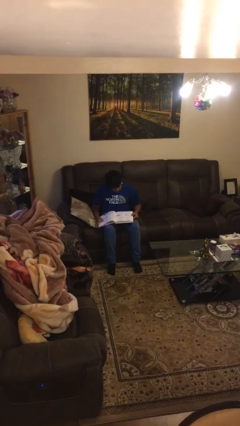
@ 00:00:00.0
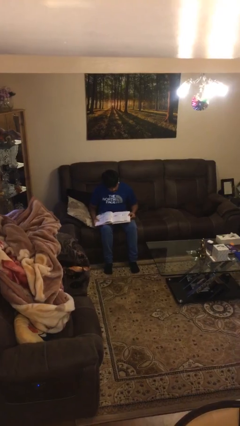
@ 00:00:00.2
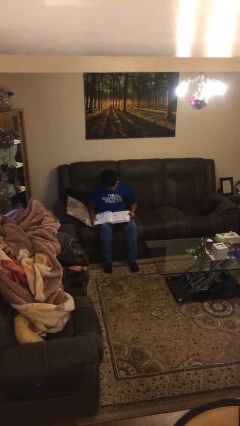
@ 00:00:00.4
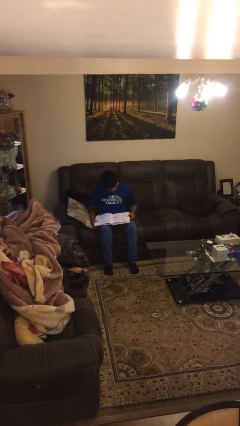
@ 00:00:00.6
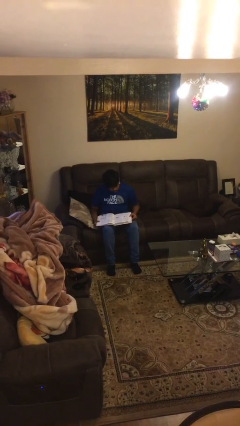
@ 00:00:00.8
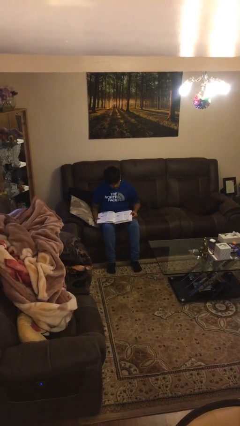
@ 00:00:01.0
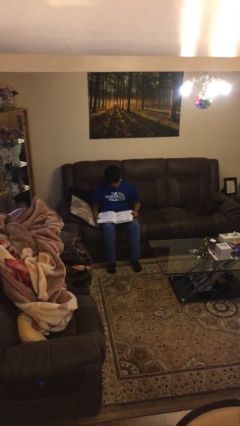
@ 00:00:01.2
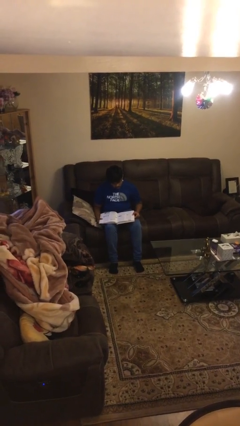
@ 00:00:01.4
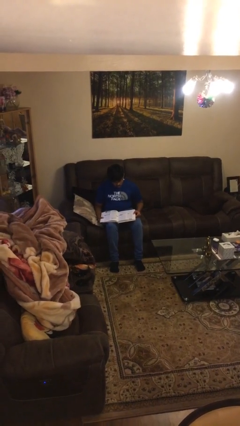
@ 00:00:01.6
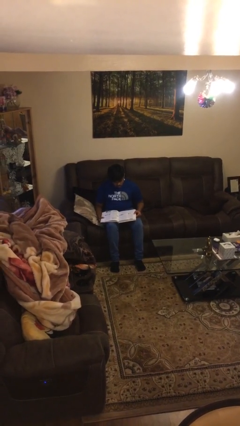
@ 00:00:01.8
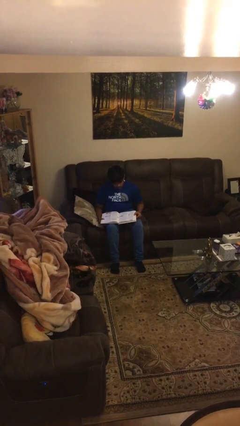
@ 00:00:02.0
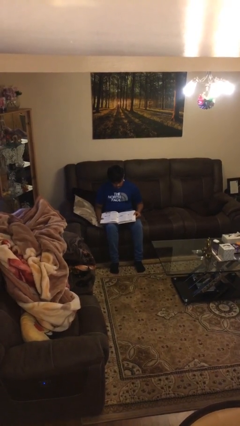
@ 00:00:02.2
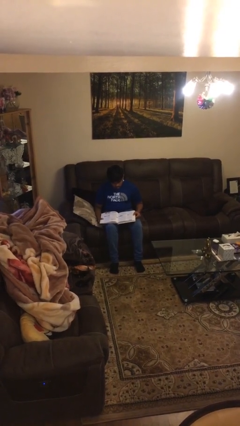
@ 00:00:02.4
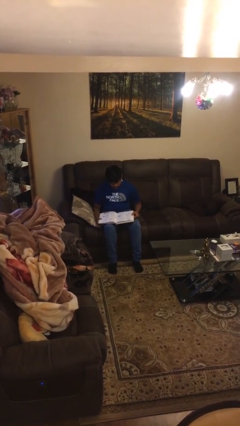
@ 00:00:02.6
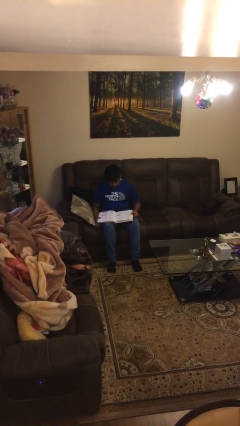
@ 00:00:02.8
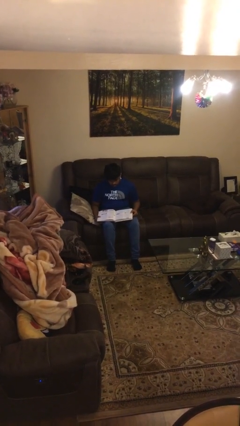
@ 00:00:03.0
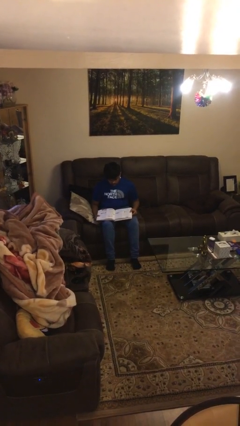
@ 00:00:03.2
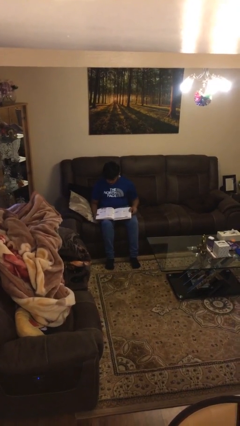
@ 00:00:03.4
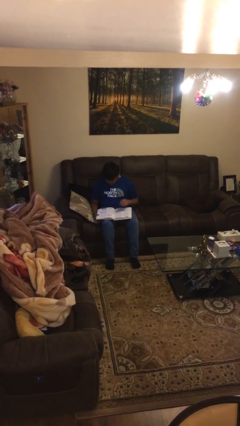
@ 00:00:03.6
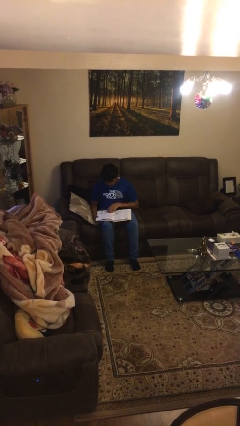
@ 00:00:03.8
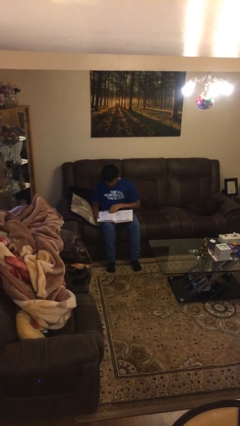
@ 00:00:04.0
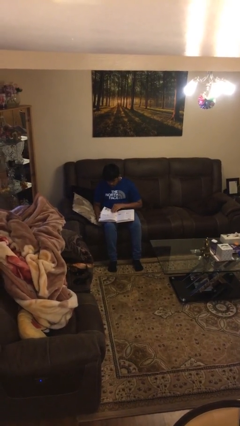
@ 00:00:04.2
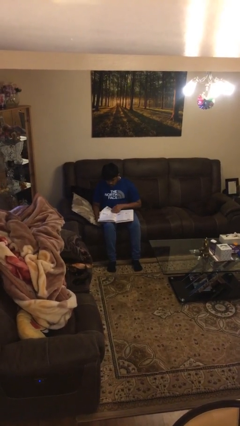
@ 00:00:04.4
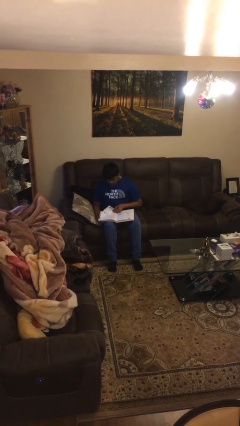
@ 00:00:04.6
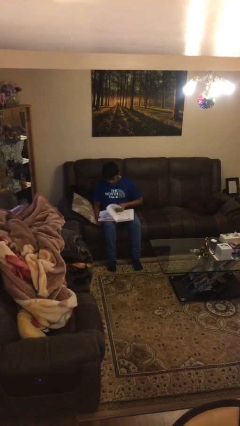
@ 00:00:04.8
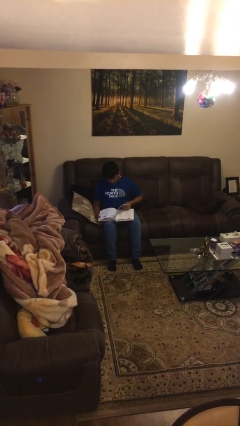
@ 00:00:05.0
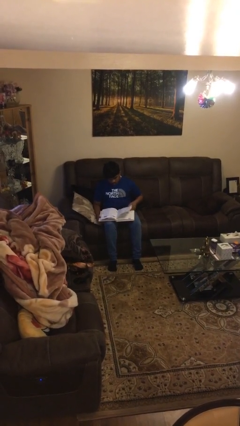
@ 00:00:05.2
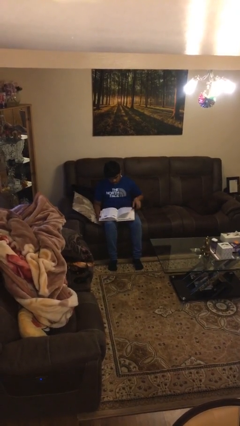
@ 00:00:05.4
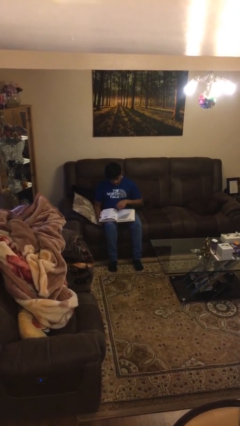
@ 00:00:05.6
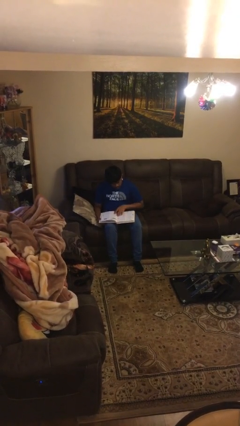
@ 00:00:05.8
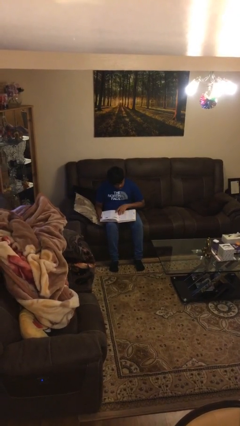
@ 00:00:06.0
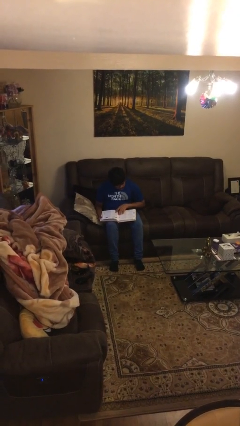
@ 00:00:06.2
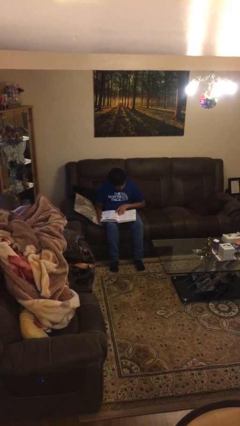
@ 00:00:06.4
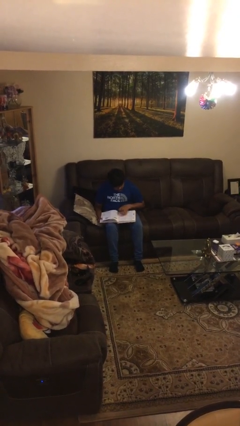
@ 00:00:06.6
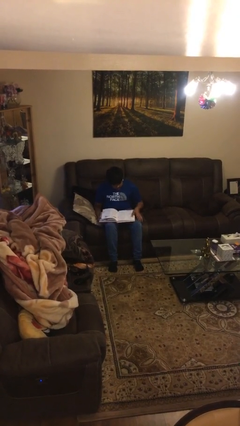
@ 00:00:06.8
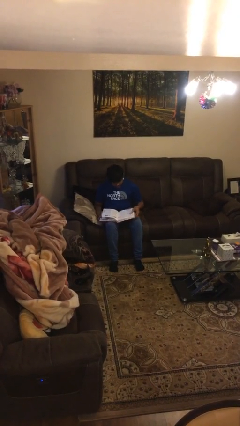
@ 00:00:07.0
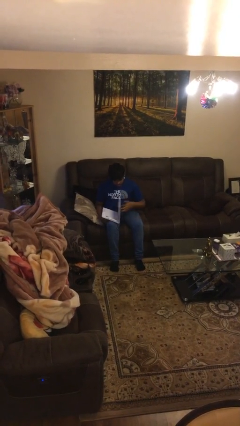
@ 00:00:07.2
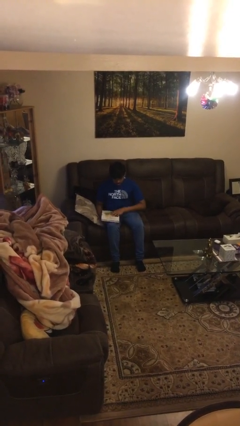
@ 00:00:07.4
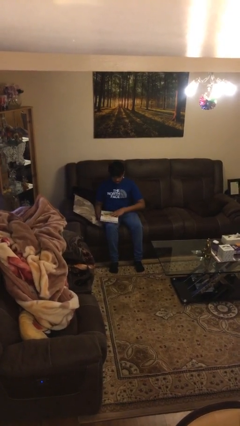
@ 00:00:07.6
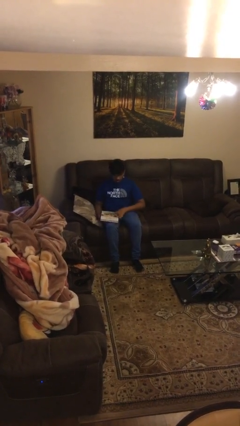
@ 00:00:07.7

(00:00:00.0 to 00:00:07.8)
person reads document

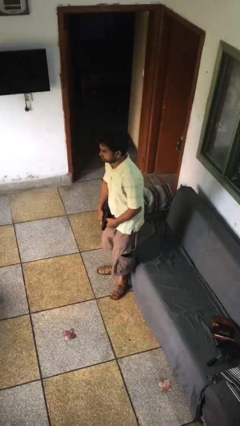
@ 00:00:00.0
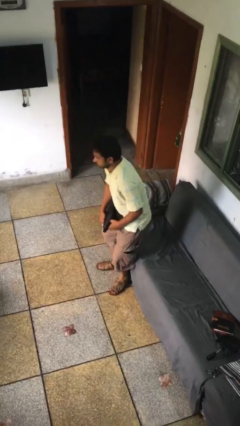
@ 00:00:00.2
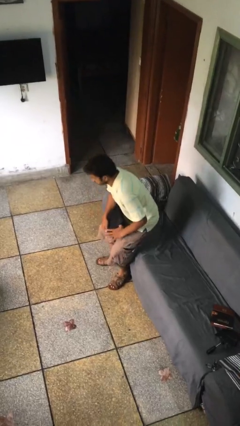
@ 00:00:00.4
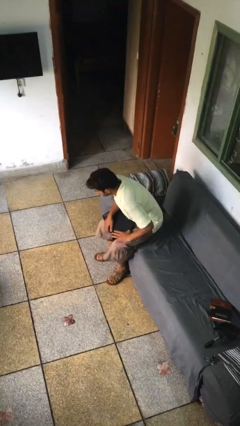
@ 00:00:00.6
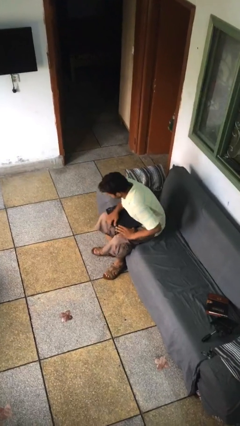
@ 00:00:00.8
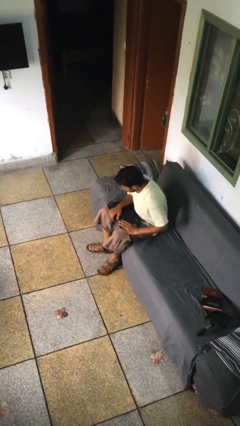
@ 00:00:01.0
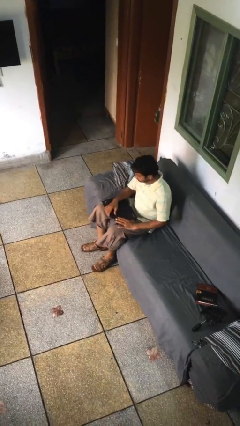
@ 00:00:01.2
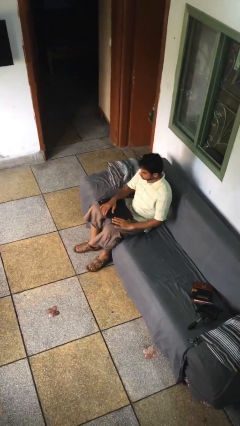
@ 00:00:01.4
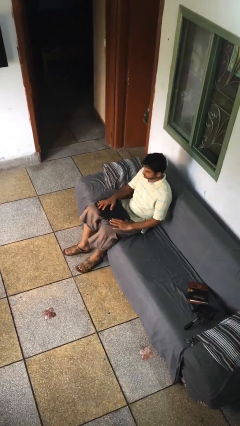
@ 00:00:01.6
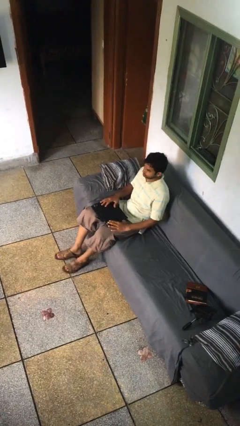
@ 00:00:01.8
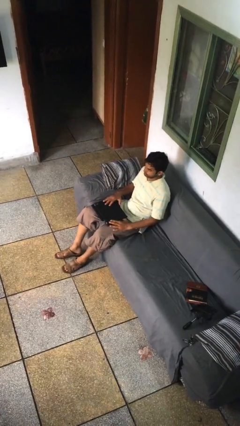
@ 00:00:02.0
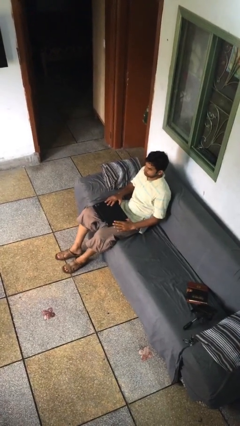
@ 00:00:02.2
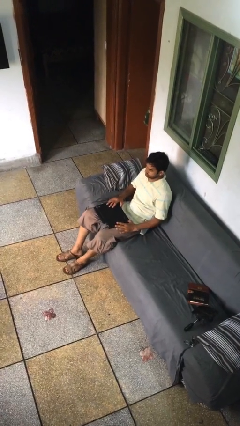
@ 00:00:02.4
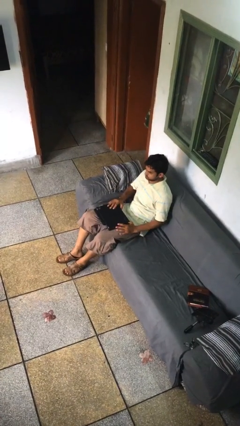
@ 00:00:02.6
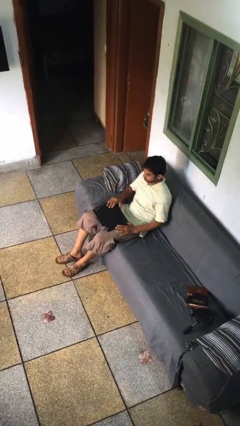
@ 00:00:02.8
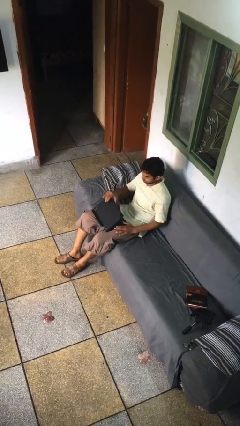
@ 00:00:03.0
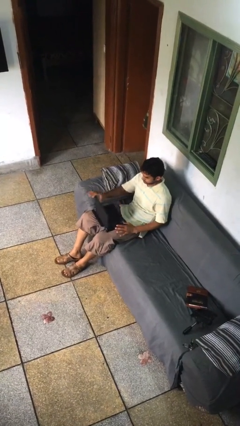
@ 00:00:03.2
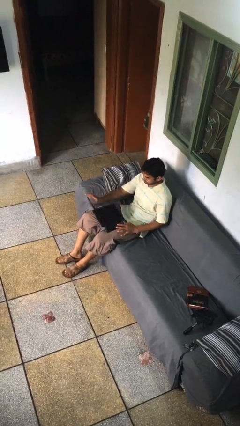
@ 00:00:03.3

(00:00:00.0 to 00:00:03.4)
person sits down

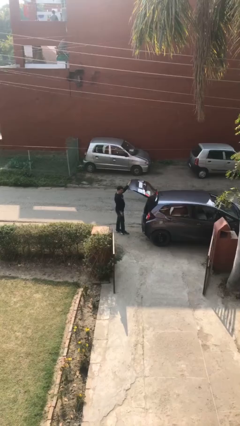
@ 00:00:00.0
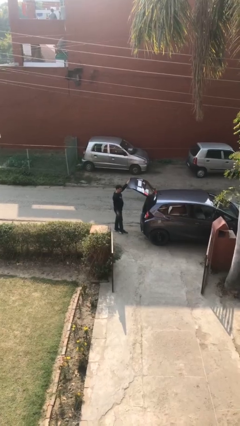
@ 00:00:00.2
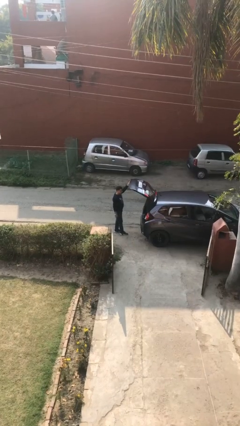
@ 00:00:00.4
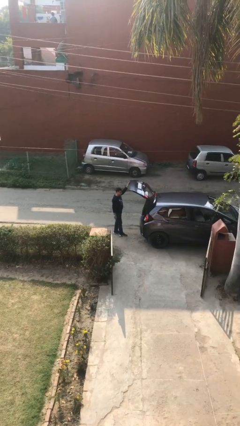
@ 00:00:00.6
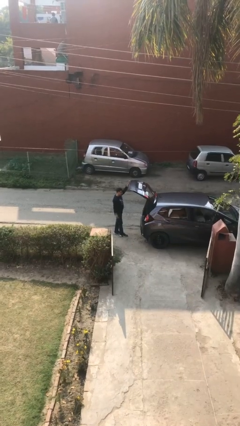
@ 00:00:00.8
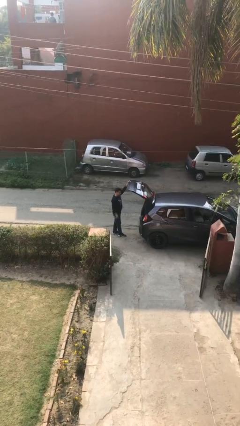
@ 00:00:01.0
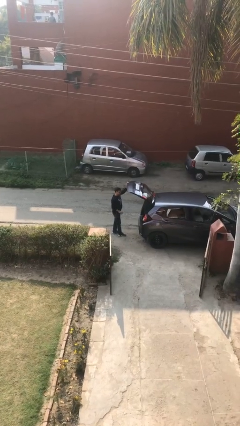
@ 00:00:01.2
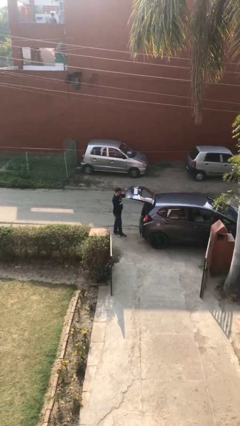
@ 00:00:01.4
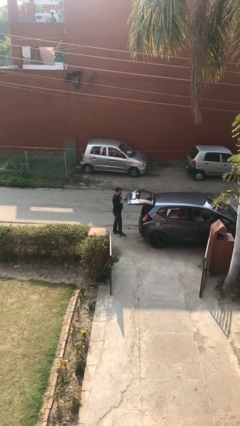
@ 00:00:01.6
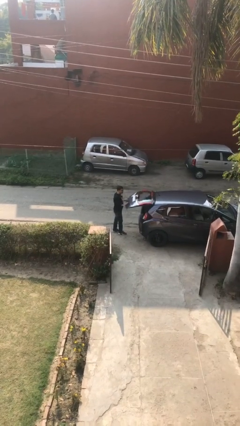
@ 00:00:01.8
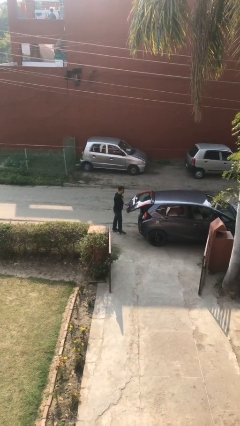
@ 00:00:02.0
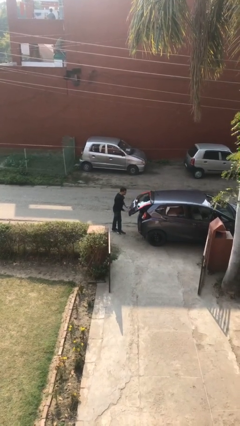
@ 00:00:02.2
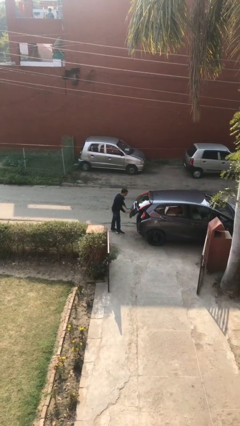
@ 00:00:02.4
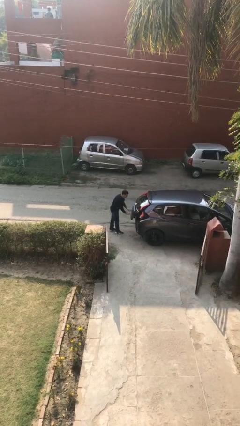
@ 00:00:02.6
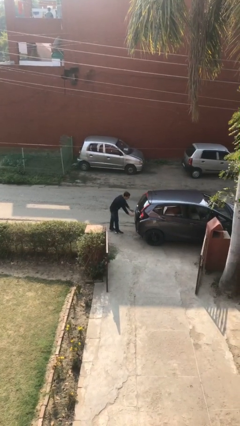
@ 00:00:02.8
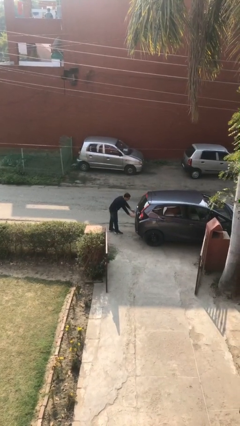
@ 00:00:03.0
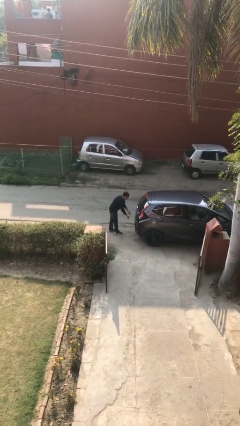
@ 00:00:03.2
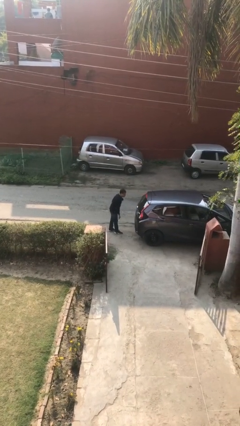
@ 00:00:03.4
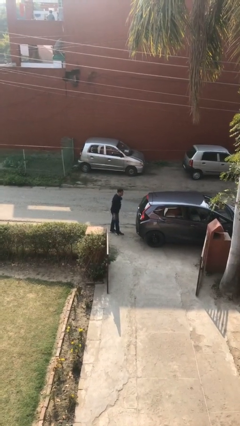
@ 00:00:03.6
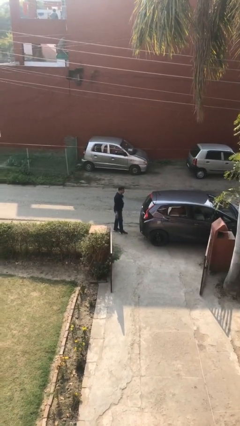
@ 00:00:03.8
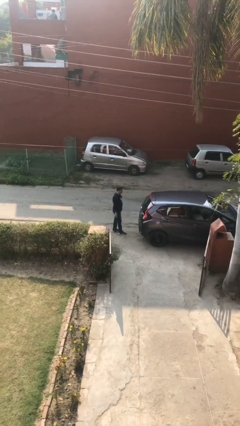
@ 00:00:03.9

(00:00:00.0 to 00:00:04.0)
person closes car trunk

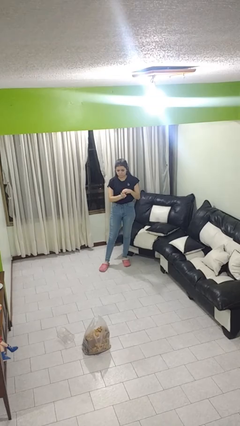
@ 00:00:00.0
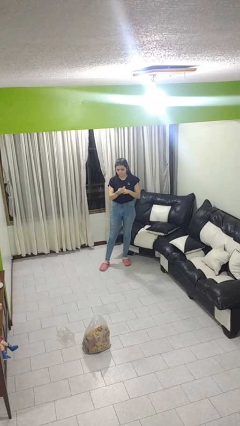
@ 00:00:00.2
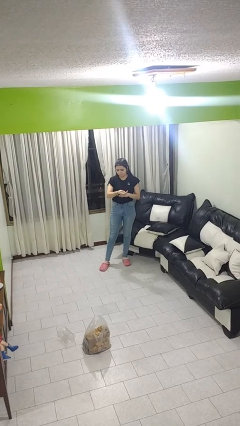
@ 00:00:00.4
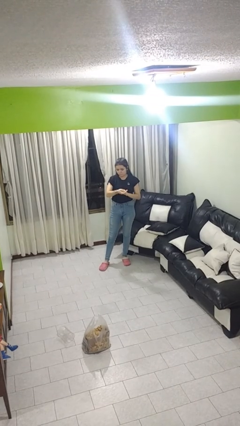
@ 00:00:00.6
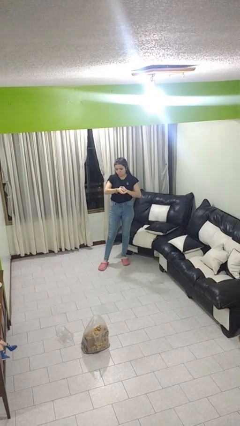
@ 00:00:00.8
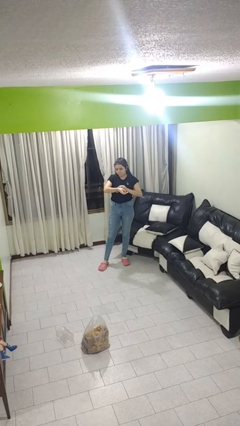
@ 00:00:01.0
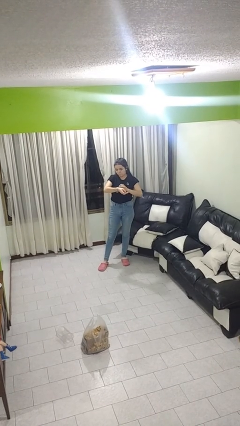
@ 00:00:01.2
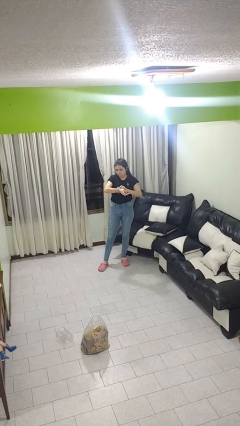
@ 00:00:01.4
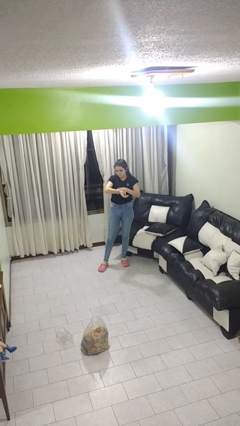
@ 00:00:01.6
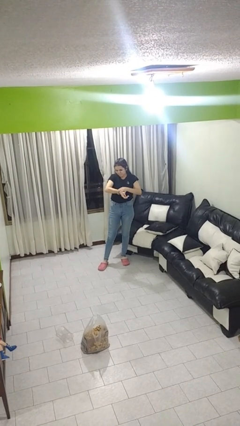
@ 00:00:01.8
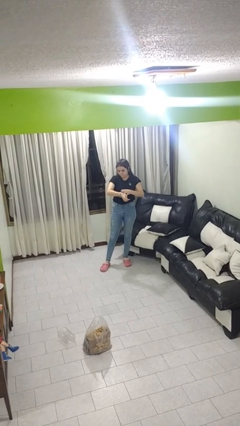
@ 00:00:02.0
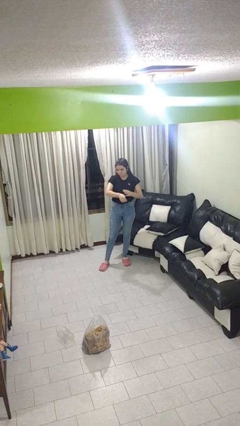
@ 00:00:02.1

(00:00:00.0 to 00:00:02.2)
person puts on wristwatch

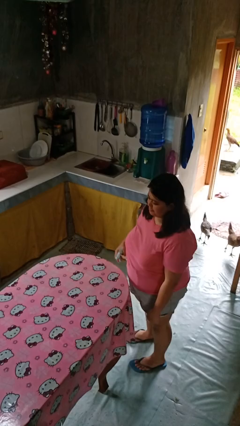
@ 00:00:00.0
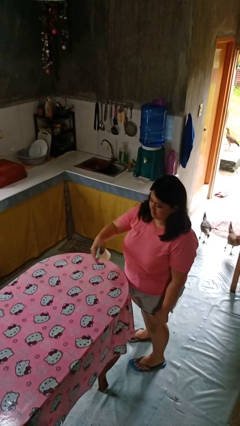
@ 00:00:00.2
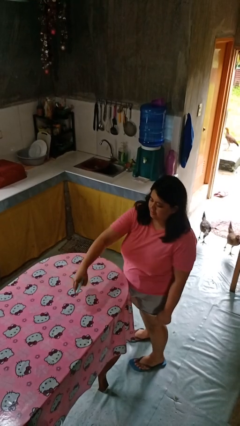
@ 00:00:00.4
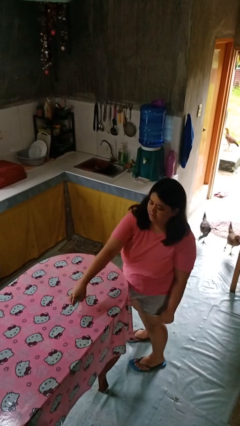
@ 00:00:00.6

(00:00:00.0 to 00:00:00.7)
person sprays from bottle
